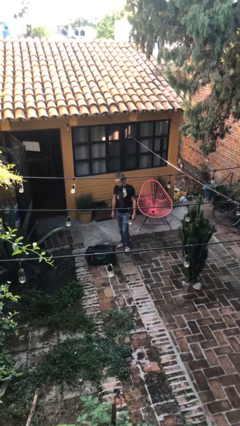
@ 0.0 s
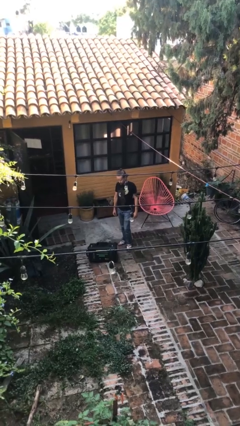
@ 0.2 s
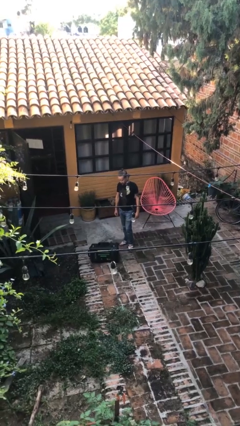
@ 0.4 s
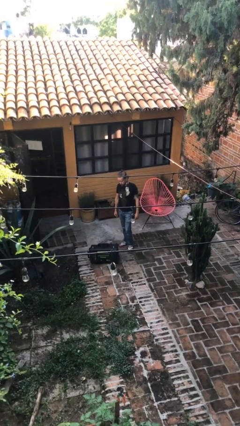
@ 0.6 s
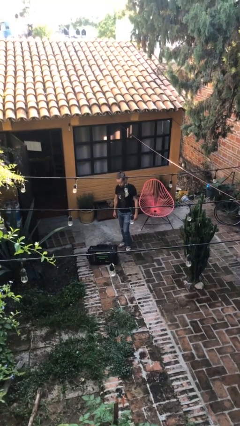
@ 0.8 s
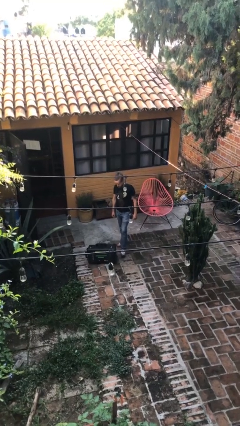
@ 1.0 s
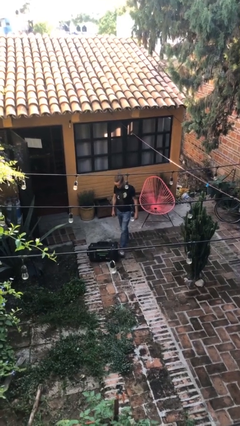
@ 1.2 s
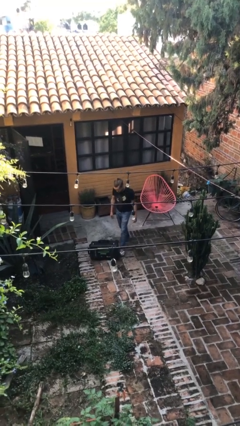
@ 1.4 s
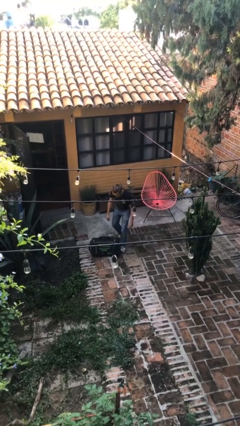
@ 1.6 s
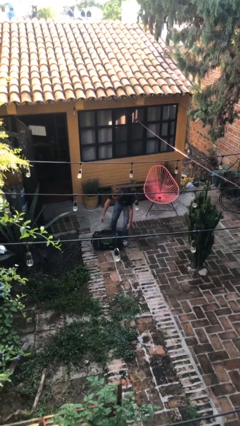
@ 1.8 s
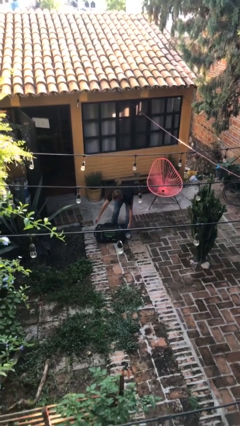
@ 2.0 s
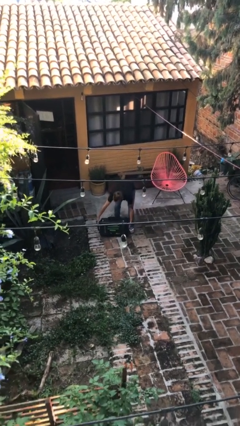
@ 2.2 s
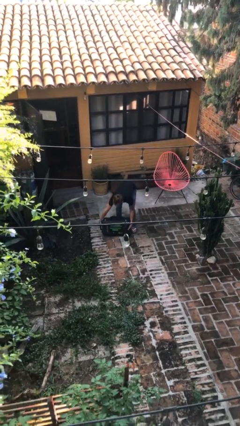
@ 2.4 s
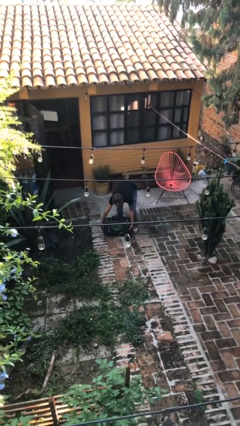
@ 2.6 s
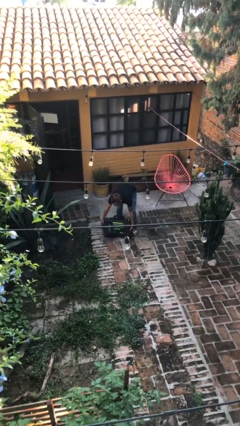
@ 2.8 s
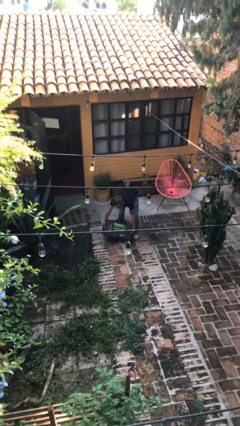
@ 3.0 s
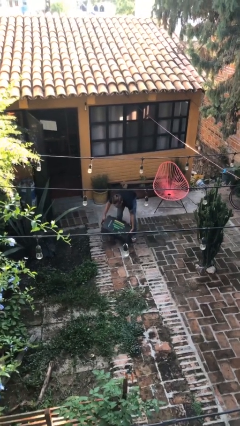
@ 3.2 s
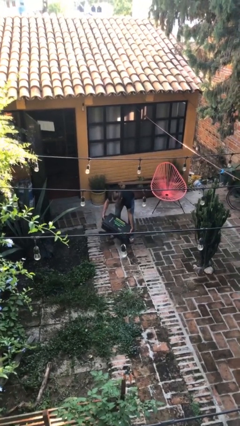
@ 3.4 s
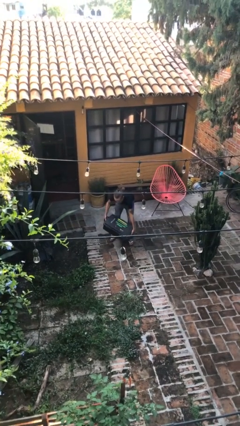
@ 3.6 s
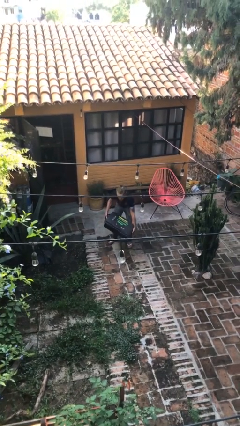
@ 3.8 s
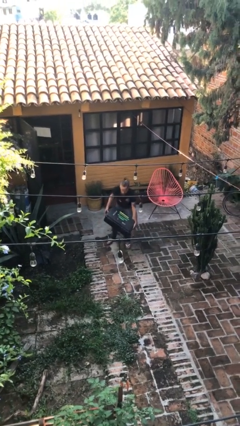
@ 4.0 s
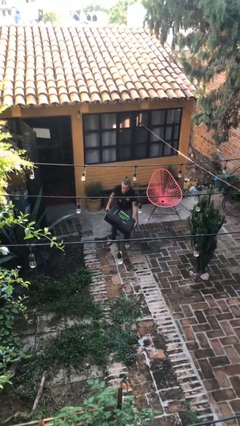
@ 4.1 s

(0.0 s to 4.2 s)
person picks up object from floor

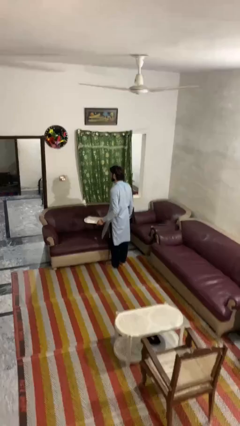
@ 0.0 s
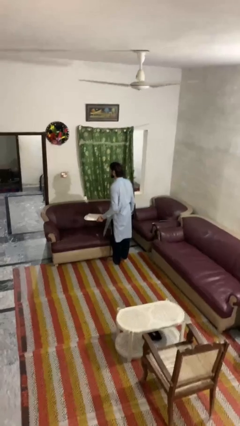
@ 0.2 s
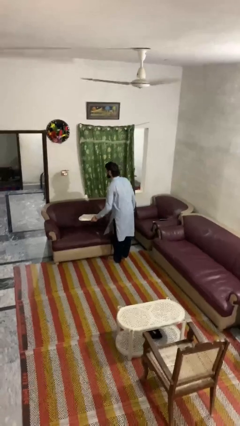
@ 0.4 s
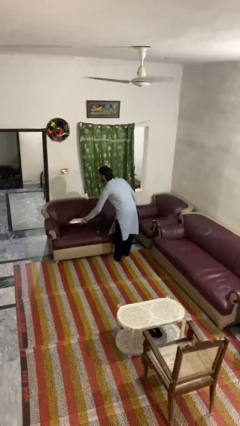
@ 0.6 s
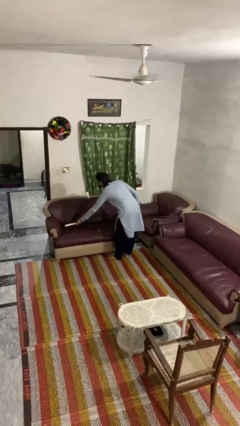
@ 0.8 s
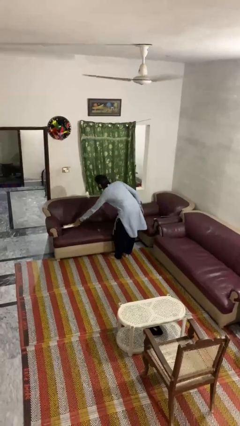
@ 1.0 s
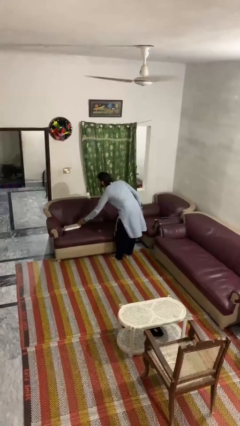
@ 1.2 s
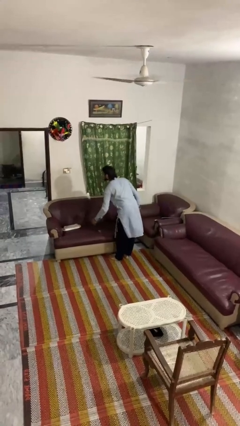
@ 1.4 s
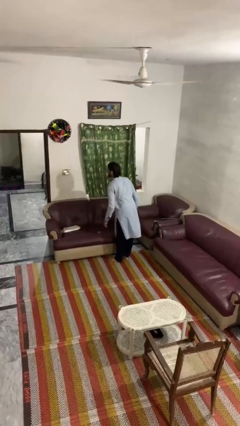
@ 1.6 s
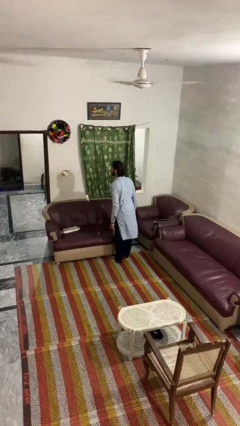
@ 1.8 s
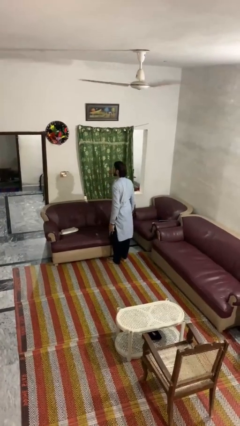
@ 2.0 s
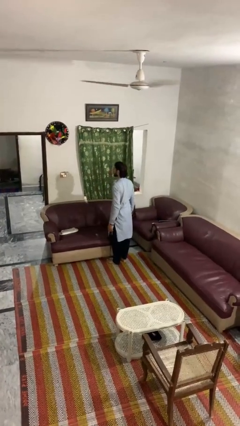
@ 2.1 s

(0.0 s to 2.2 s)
person puts down object on couch

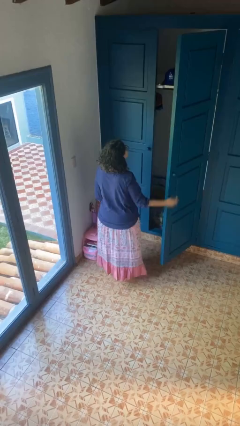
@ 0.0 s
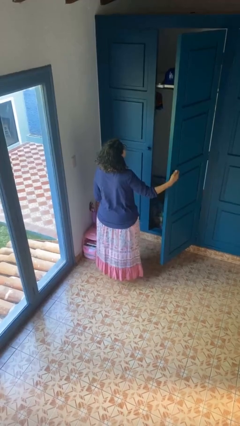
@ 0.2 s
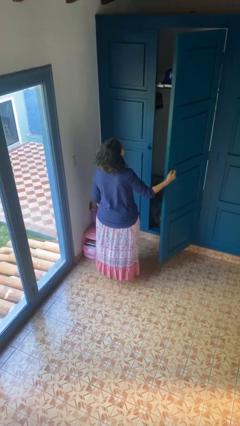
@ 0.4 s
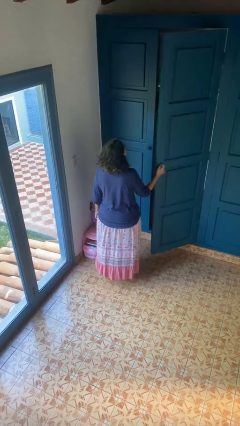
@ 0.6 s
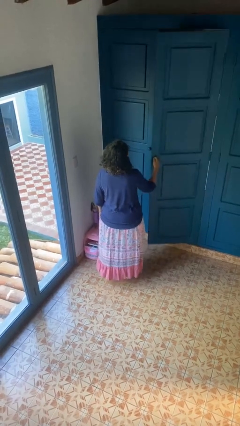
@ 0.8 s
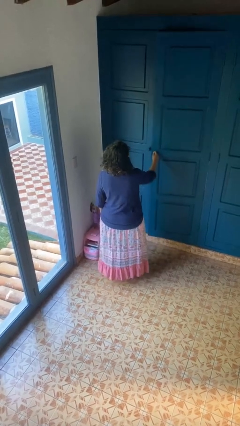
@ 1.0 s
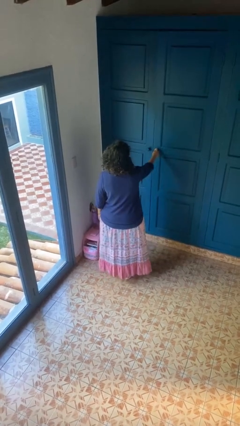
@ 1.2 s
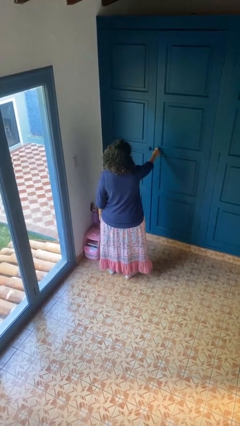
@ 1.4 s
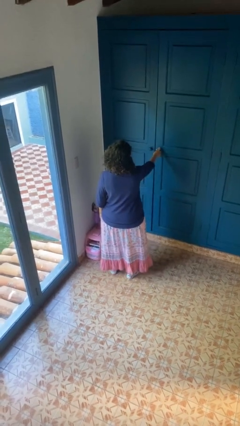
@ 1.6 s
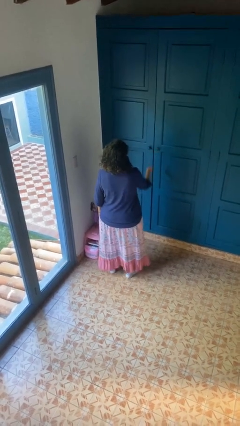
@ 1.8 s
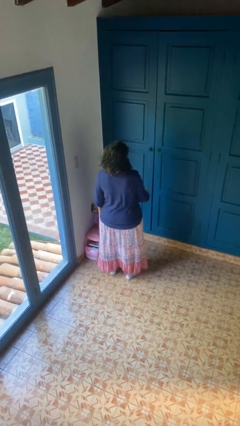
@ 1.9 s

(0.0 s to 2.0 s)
person closes closet door

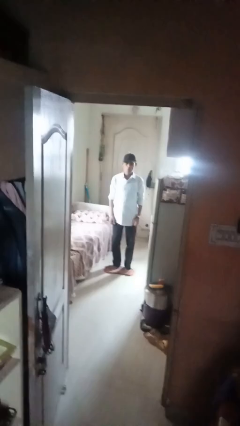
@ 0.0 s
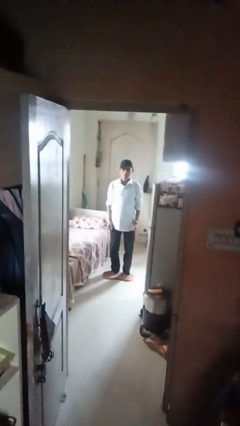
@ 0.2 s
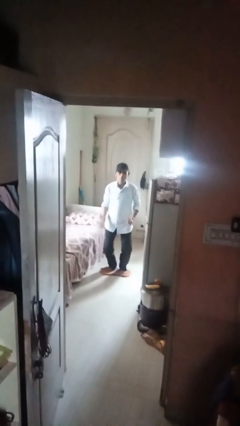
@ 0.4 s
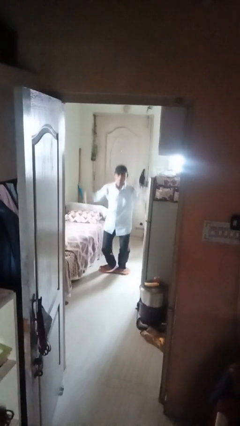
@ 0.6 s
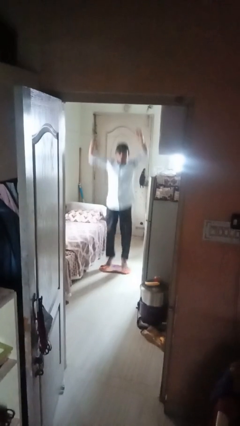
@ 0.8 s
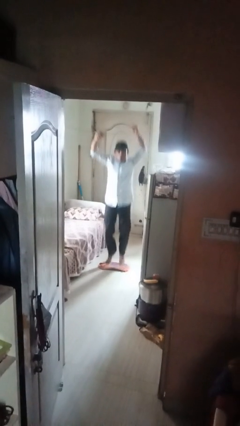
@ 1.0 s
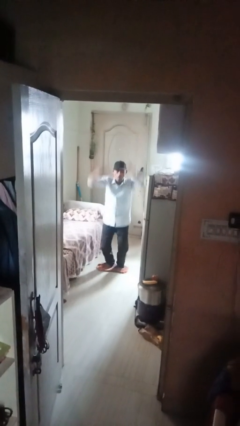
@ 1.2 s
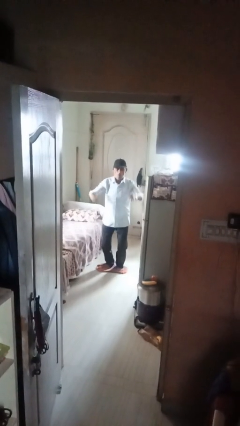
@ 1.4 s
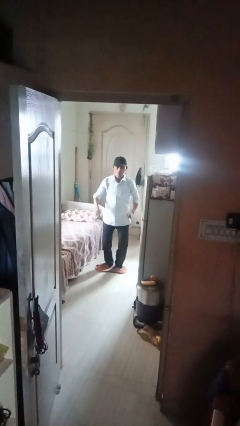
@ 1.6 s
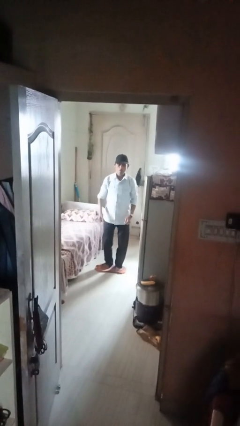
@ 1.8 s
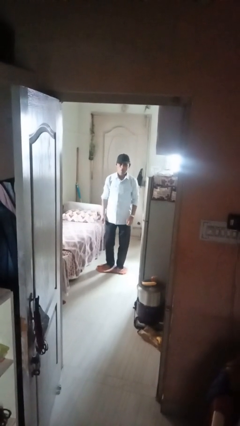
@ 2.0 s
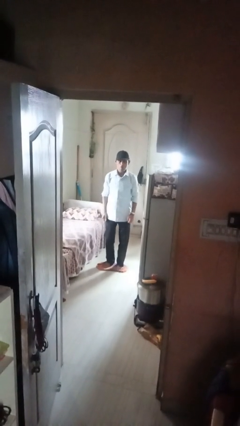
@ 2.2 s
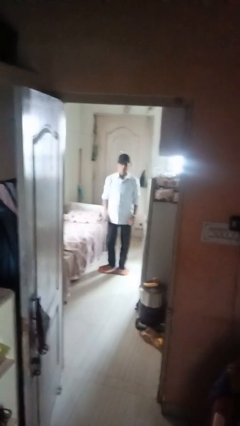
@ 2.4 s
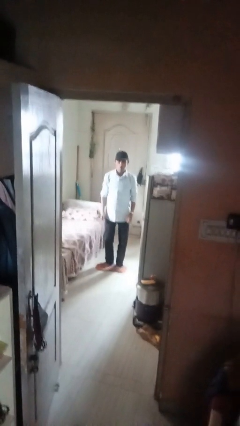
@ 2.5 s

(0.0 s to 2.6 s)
person jumps

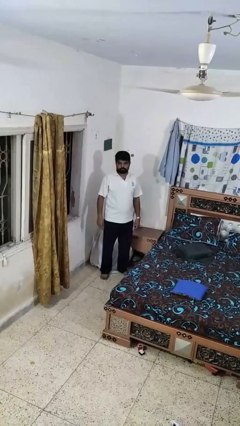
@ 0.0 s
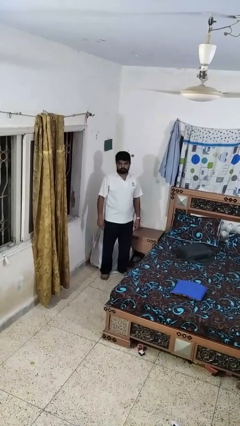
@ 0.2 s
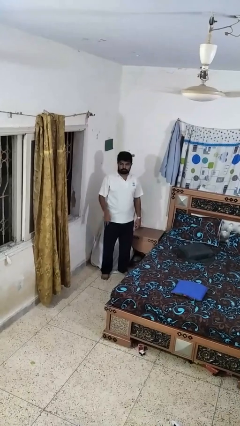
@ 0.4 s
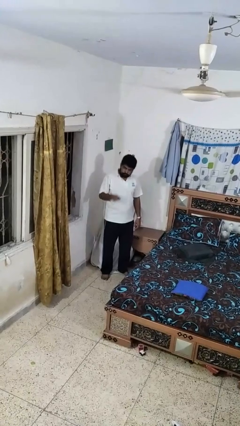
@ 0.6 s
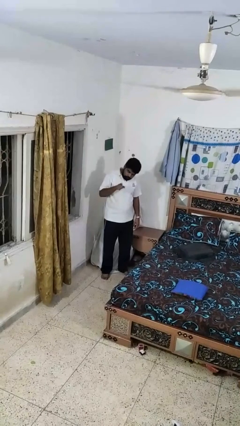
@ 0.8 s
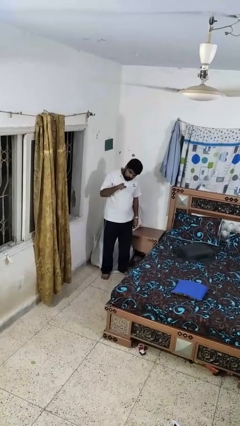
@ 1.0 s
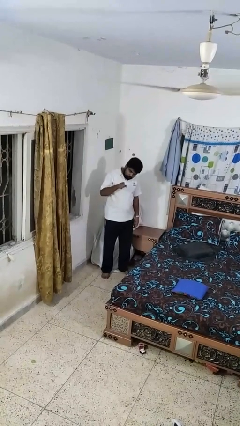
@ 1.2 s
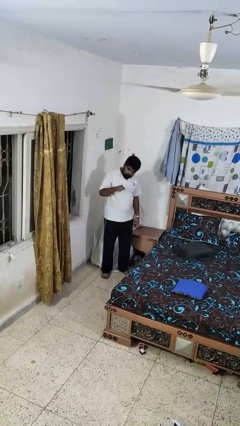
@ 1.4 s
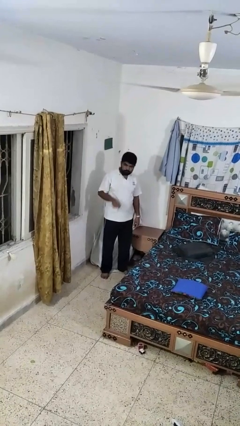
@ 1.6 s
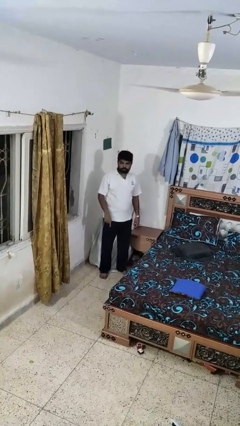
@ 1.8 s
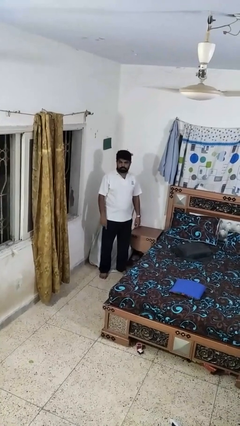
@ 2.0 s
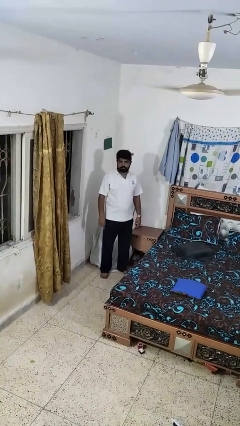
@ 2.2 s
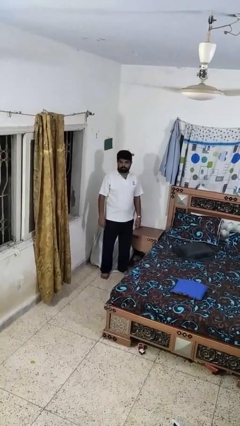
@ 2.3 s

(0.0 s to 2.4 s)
person points at person

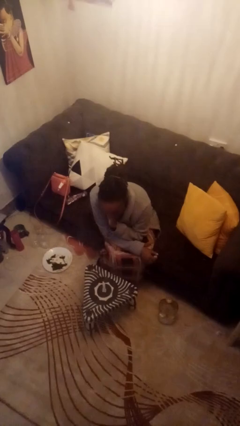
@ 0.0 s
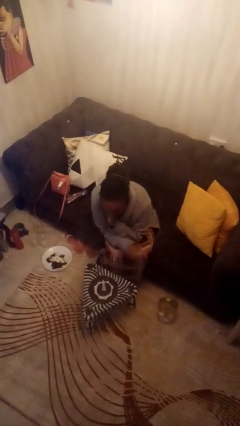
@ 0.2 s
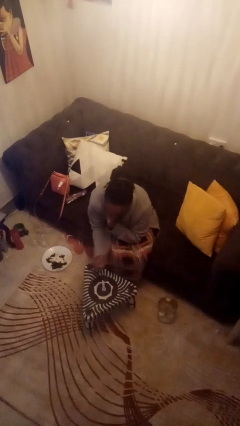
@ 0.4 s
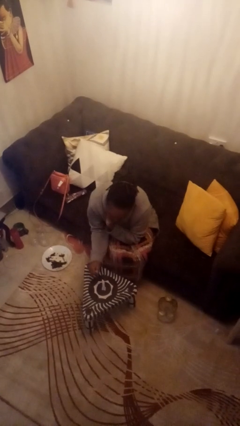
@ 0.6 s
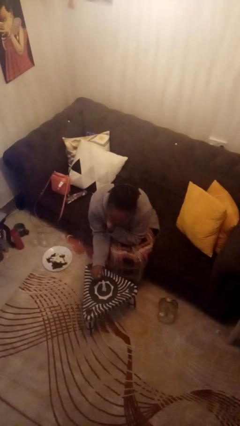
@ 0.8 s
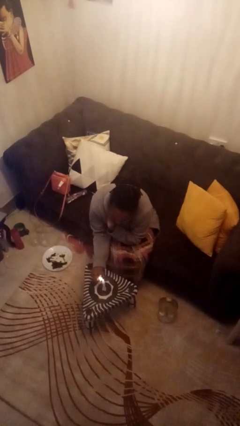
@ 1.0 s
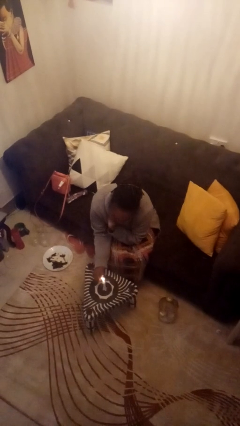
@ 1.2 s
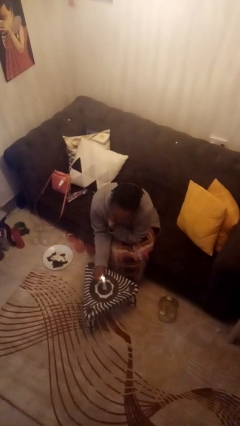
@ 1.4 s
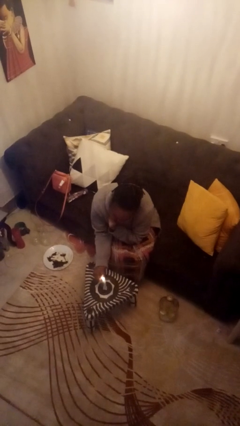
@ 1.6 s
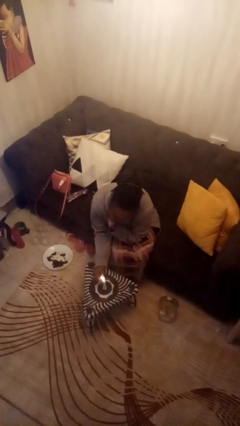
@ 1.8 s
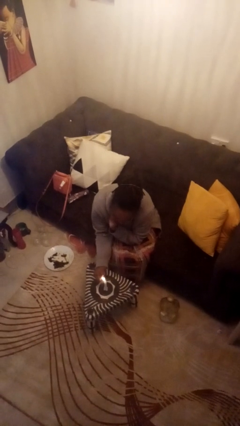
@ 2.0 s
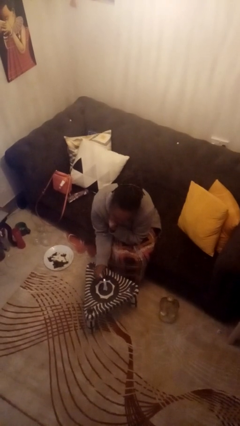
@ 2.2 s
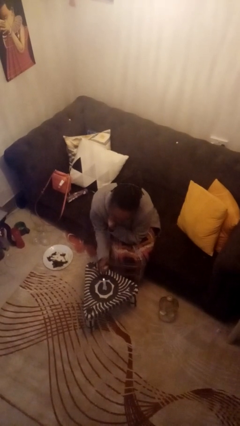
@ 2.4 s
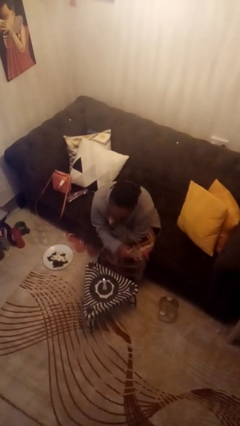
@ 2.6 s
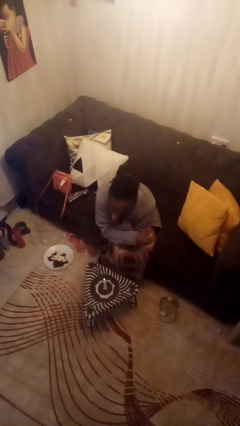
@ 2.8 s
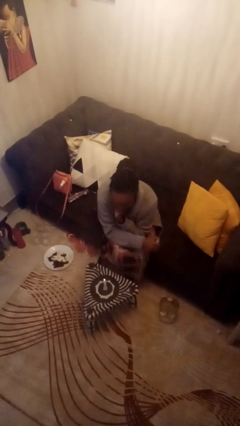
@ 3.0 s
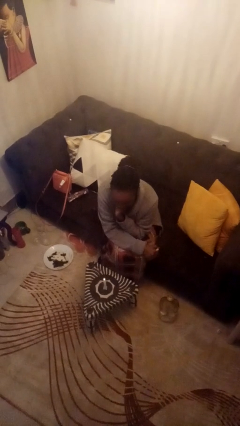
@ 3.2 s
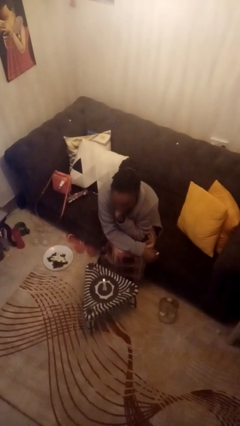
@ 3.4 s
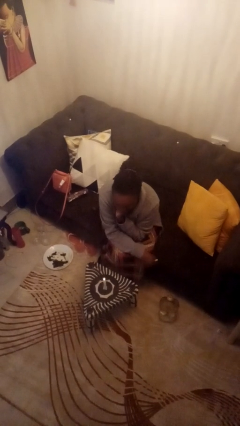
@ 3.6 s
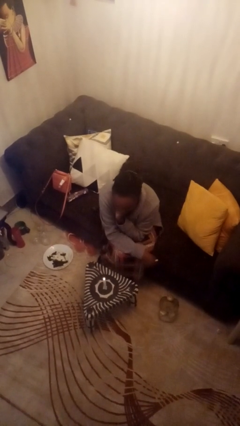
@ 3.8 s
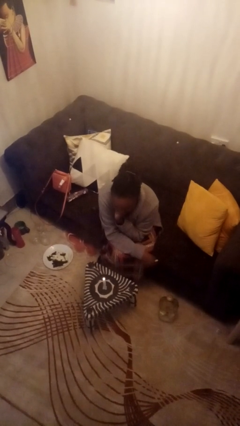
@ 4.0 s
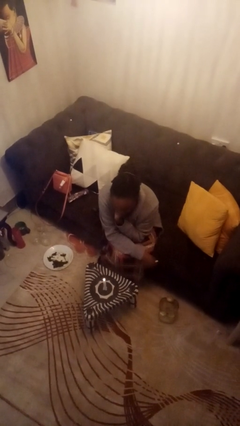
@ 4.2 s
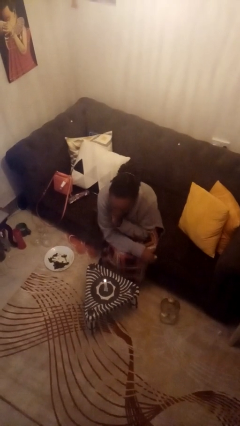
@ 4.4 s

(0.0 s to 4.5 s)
person lights candle
